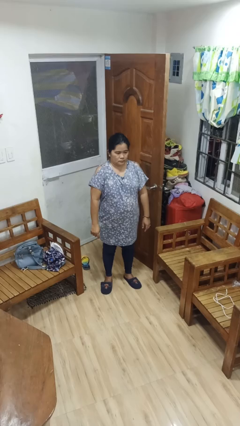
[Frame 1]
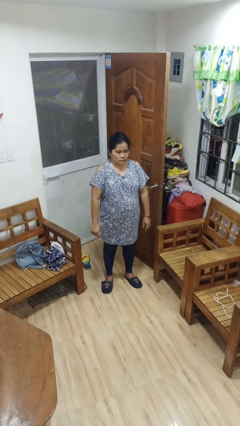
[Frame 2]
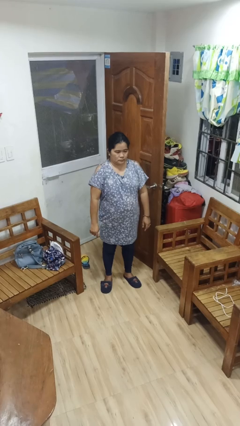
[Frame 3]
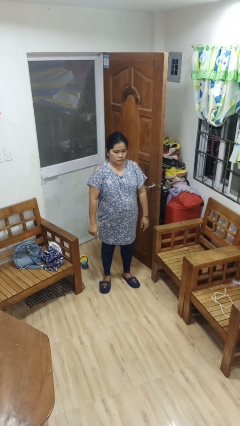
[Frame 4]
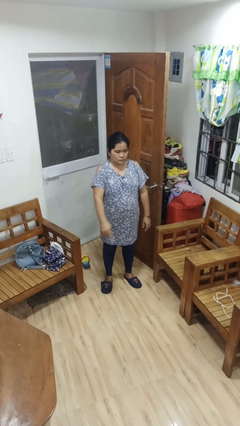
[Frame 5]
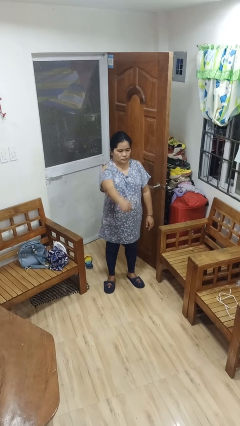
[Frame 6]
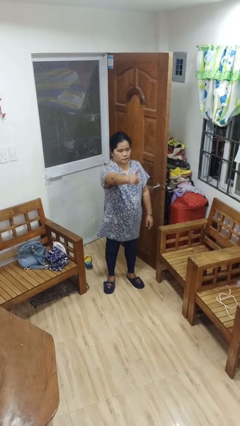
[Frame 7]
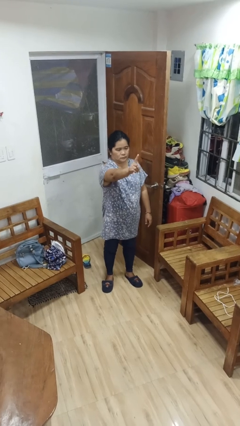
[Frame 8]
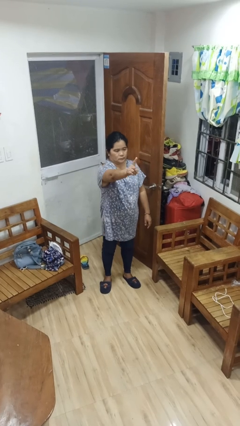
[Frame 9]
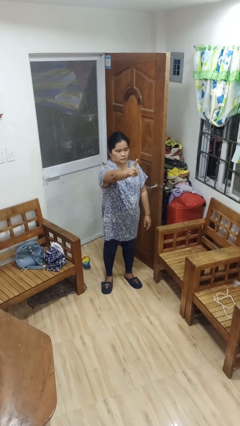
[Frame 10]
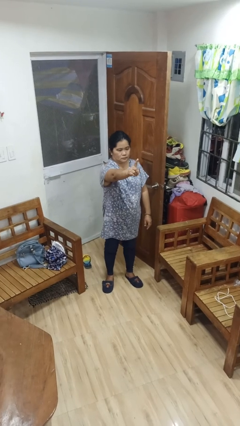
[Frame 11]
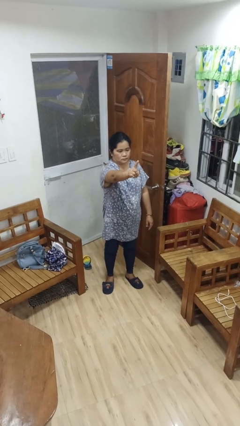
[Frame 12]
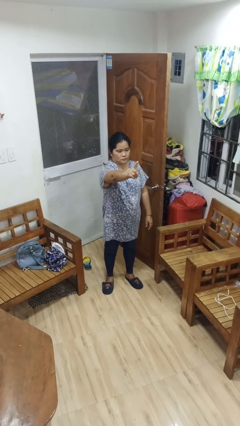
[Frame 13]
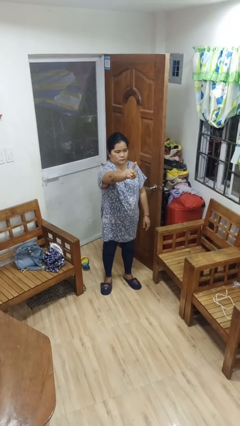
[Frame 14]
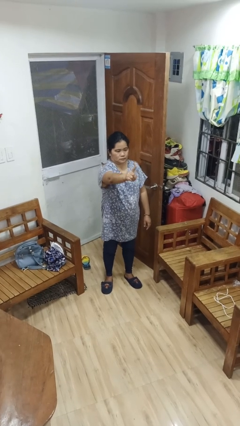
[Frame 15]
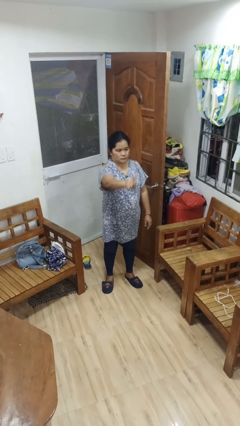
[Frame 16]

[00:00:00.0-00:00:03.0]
person gestures number one

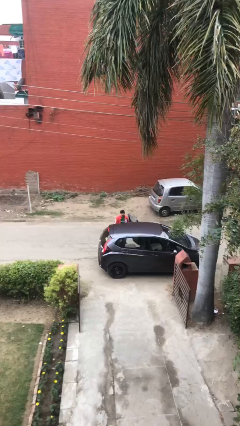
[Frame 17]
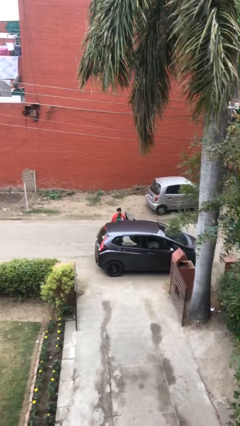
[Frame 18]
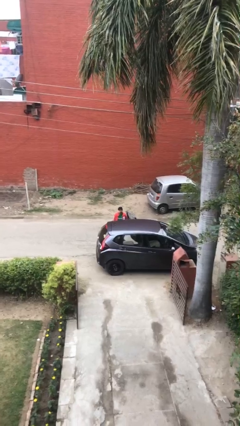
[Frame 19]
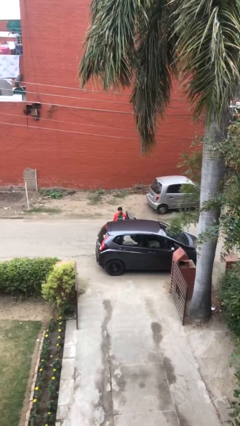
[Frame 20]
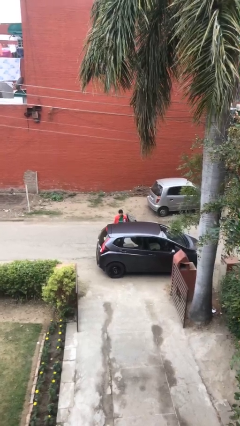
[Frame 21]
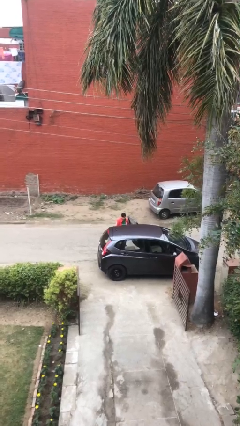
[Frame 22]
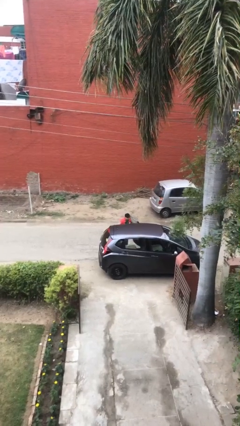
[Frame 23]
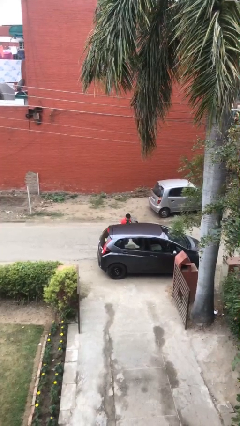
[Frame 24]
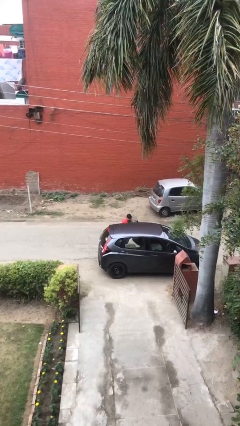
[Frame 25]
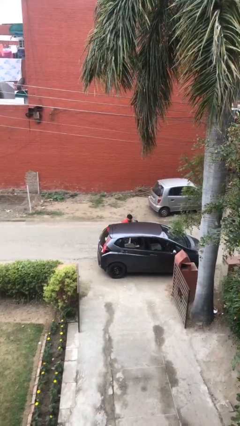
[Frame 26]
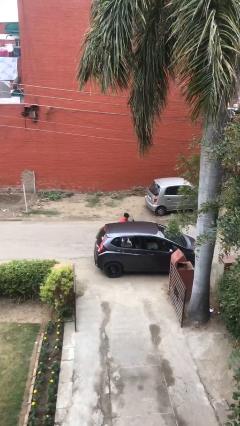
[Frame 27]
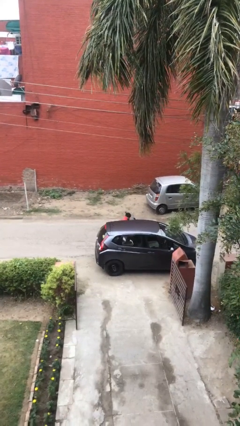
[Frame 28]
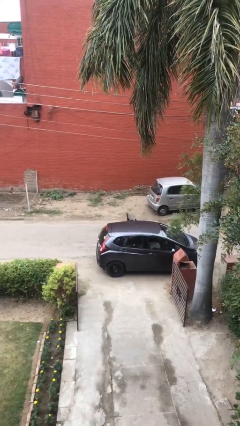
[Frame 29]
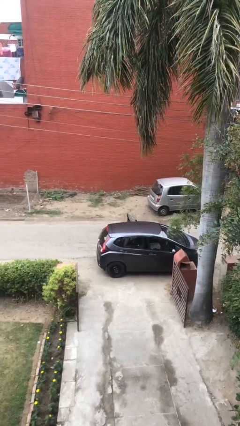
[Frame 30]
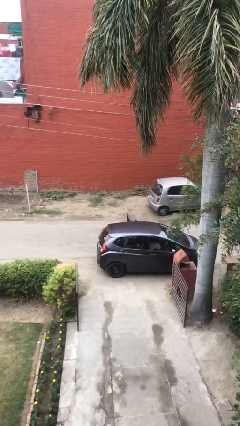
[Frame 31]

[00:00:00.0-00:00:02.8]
person enters car

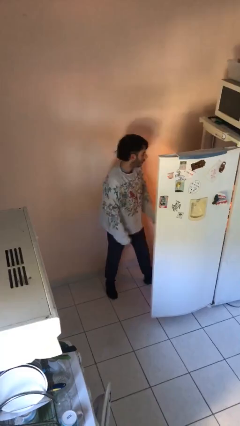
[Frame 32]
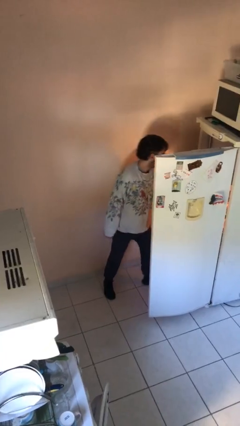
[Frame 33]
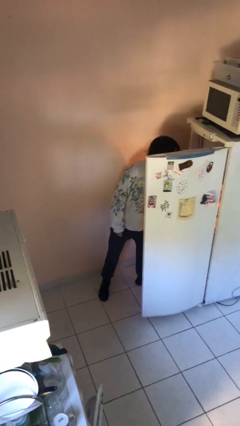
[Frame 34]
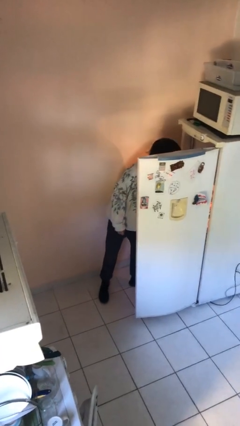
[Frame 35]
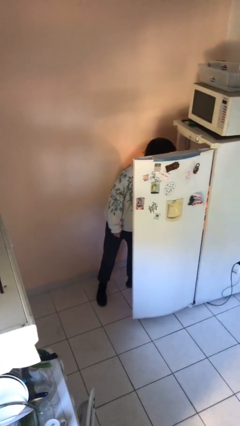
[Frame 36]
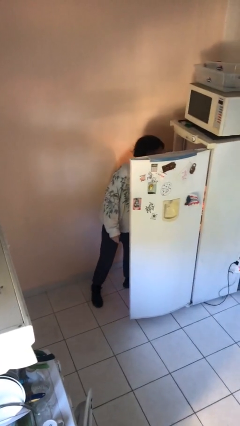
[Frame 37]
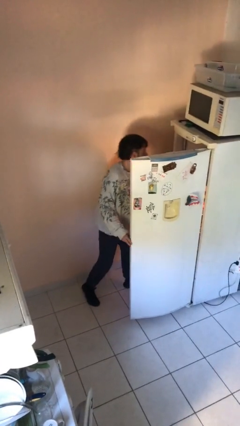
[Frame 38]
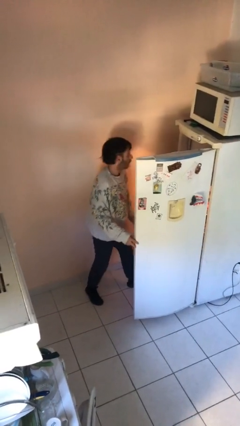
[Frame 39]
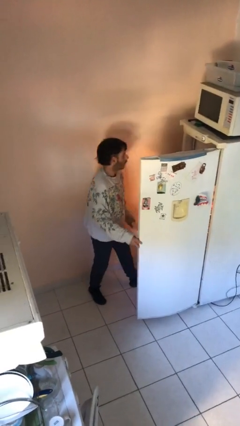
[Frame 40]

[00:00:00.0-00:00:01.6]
person takes object from refrigerator

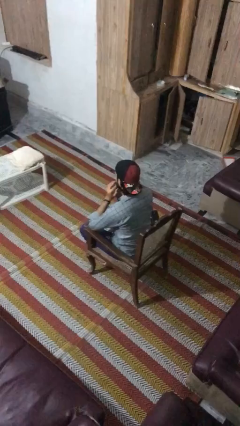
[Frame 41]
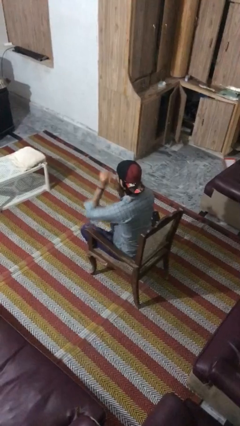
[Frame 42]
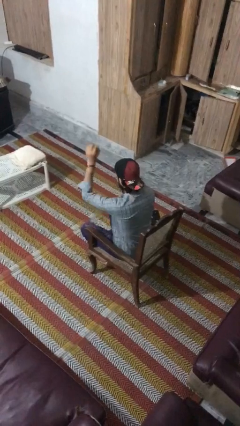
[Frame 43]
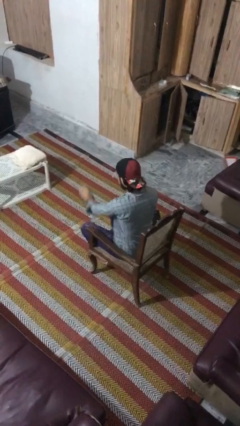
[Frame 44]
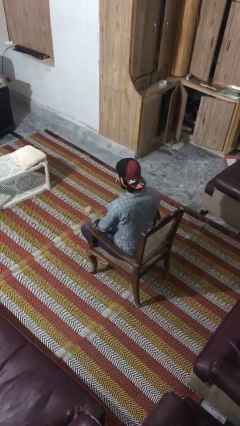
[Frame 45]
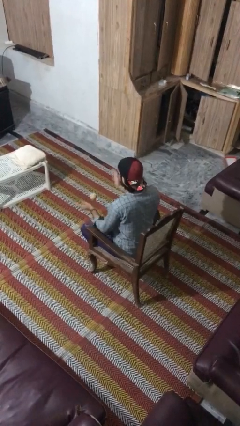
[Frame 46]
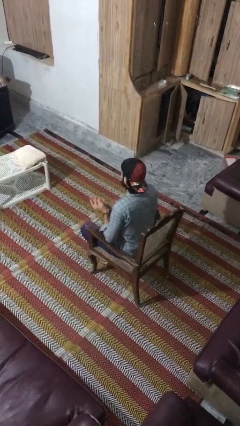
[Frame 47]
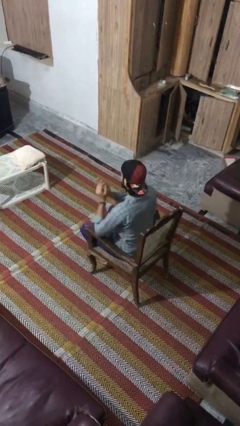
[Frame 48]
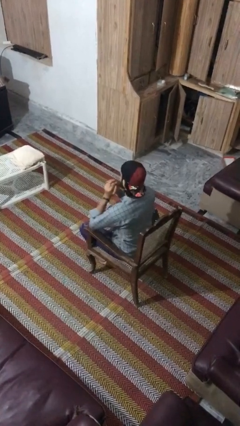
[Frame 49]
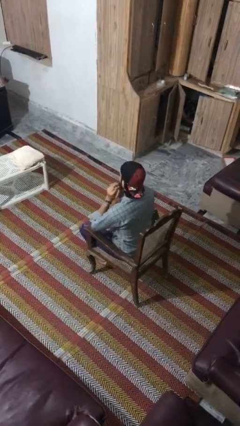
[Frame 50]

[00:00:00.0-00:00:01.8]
person bounces ball on floor

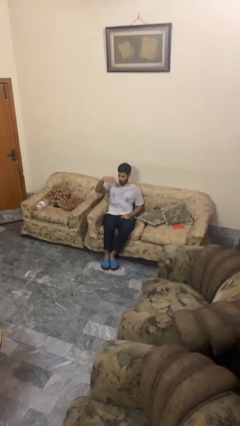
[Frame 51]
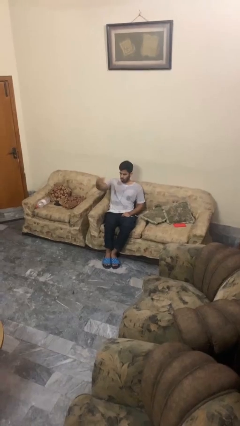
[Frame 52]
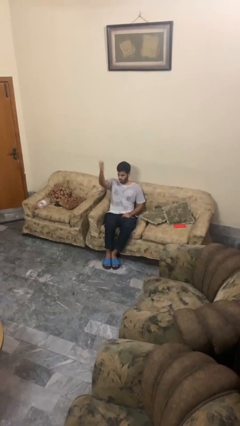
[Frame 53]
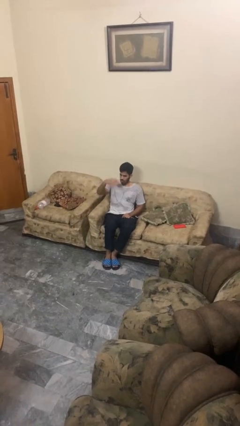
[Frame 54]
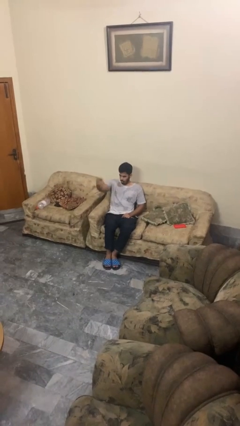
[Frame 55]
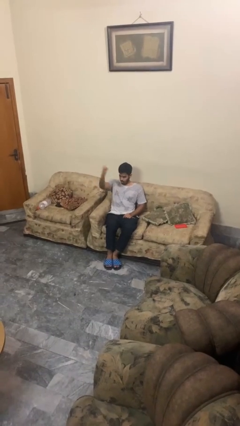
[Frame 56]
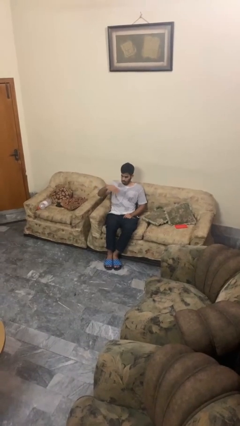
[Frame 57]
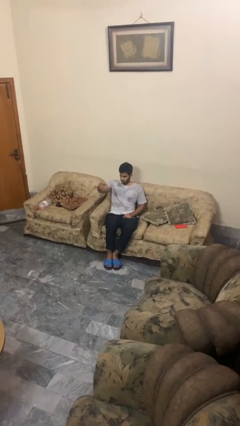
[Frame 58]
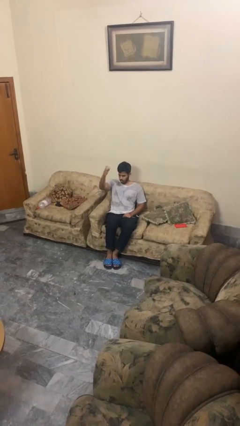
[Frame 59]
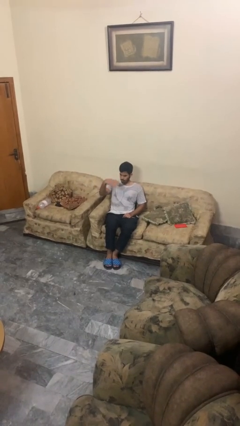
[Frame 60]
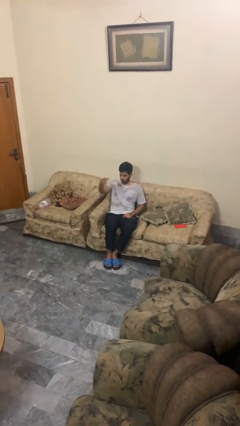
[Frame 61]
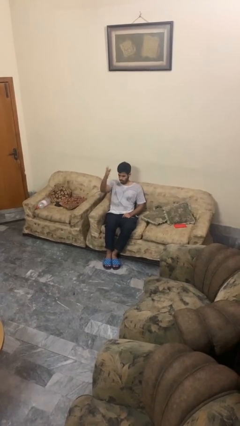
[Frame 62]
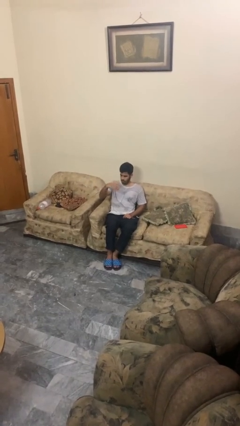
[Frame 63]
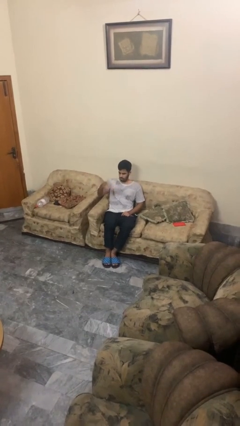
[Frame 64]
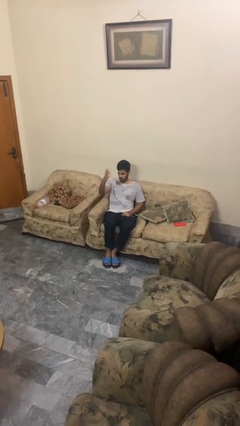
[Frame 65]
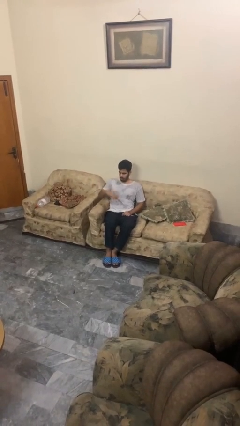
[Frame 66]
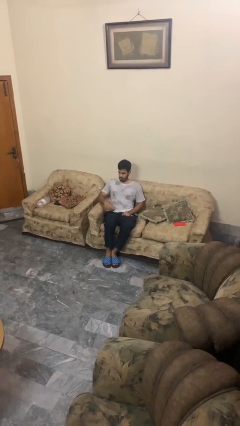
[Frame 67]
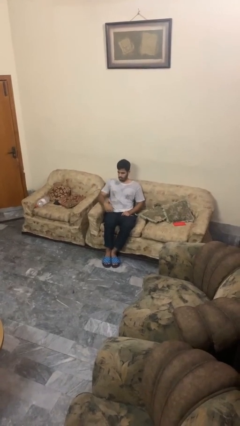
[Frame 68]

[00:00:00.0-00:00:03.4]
person gestures come here

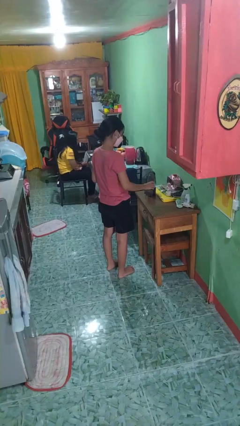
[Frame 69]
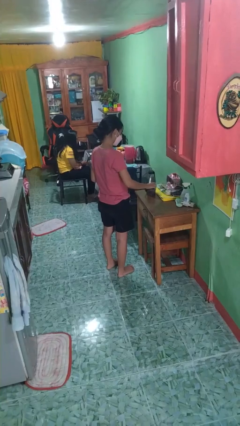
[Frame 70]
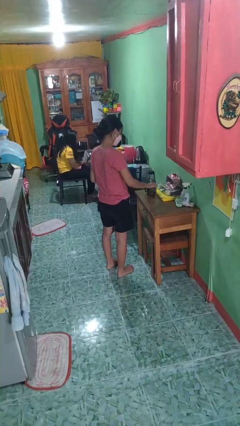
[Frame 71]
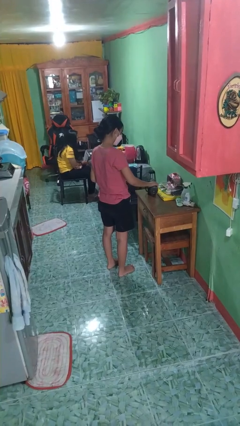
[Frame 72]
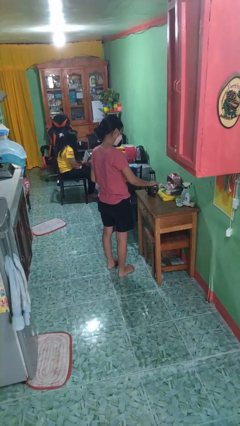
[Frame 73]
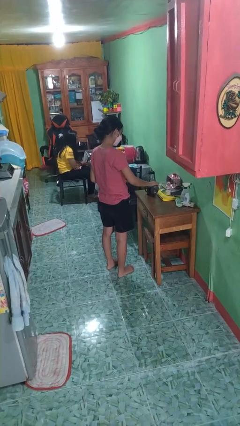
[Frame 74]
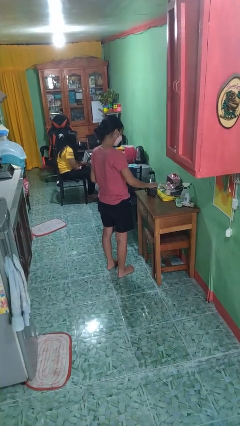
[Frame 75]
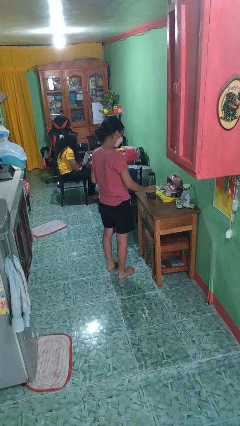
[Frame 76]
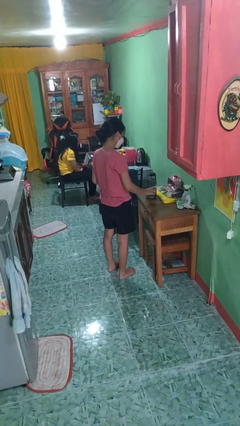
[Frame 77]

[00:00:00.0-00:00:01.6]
person pours liquid into cup

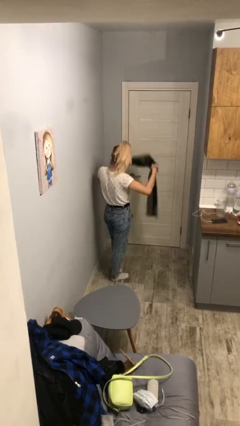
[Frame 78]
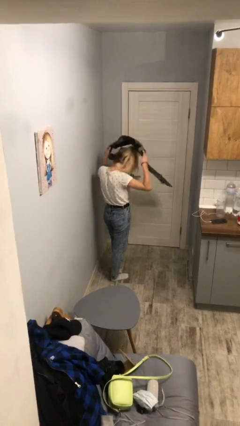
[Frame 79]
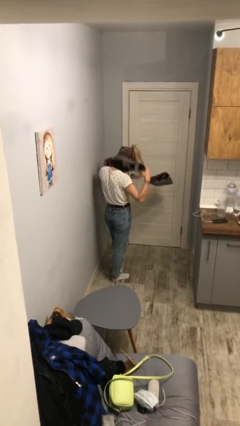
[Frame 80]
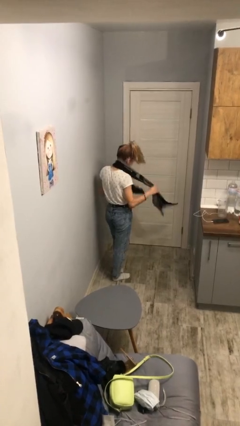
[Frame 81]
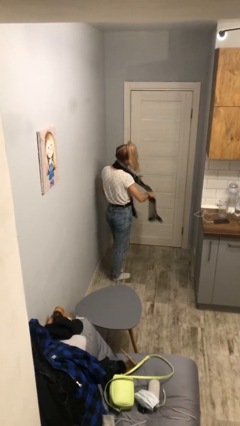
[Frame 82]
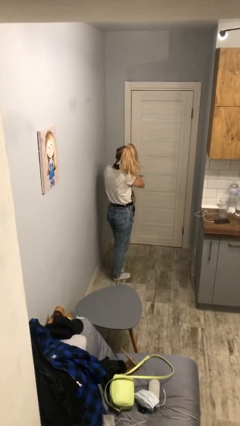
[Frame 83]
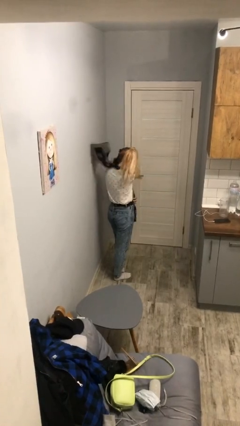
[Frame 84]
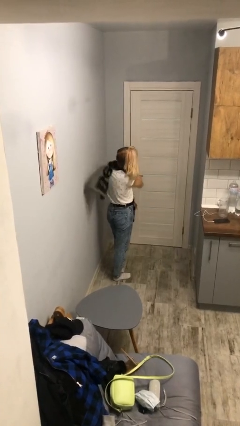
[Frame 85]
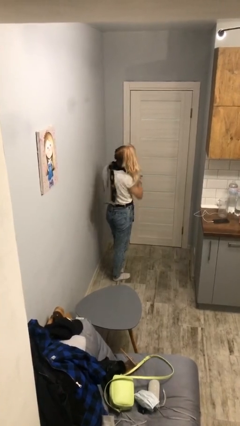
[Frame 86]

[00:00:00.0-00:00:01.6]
person puts on scarf

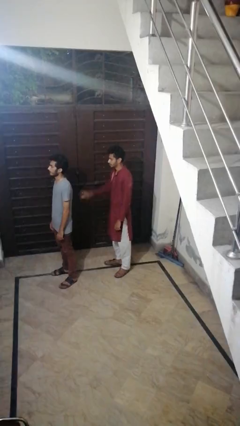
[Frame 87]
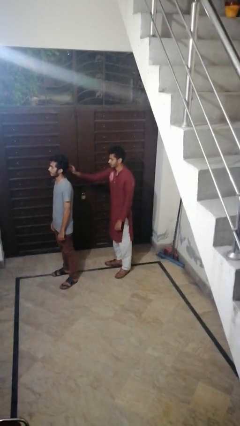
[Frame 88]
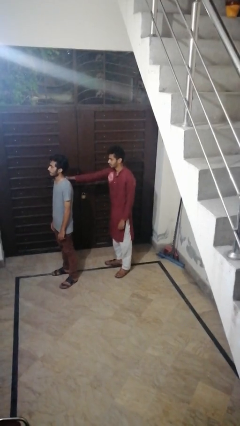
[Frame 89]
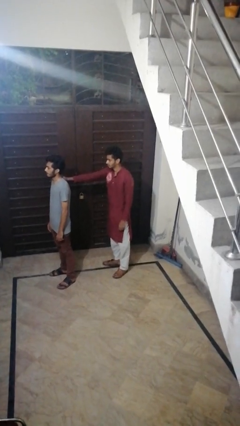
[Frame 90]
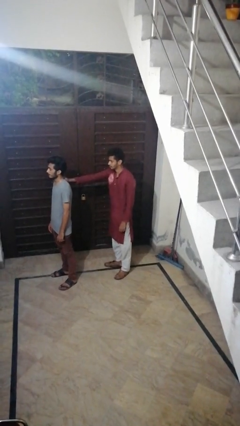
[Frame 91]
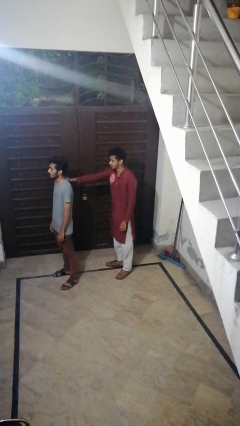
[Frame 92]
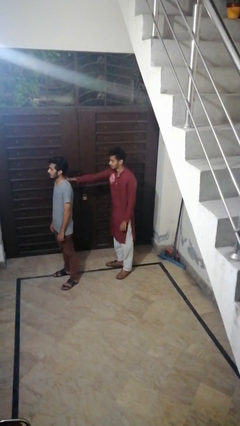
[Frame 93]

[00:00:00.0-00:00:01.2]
person grabs person by shoulder
